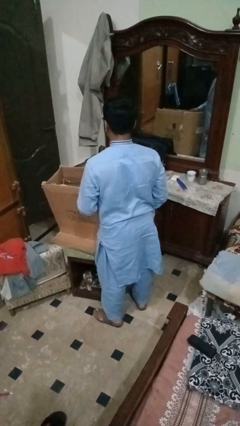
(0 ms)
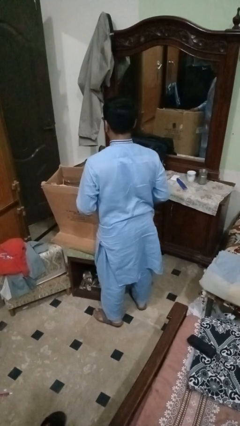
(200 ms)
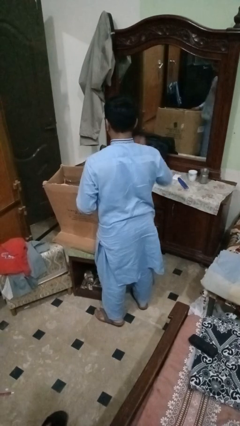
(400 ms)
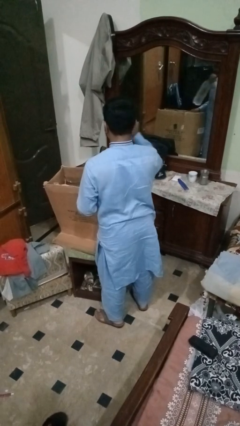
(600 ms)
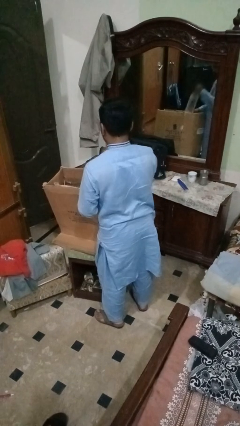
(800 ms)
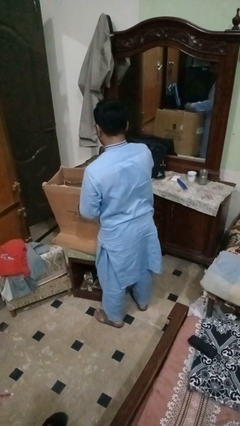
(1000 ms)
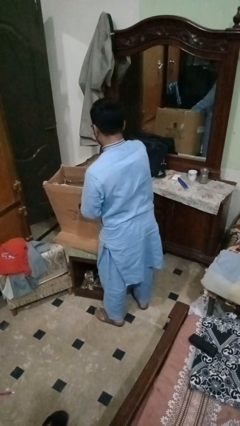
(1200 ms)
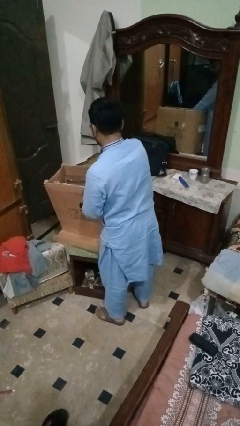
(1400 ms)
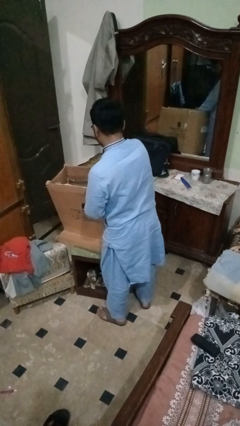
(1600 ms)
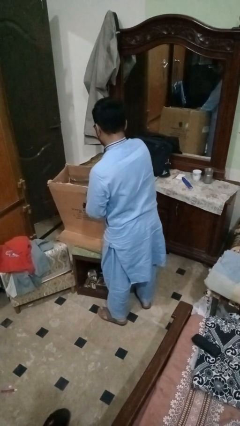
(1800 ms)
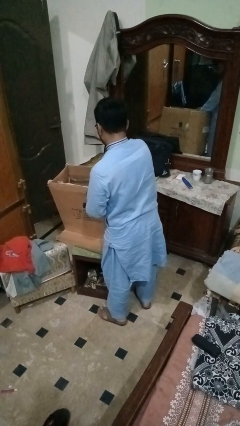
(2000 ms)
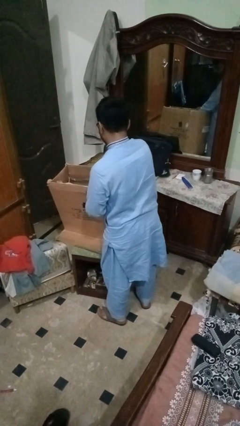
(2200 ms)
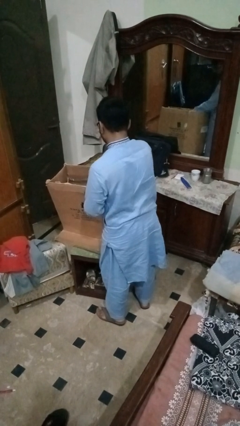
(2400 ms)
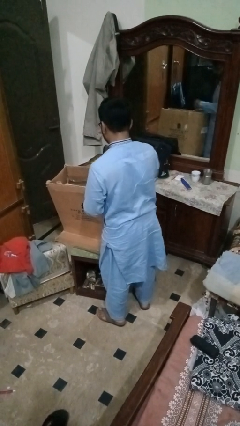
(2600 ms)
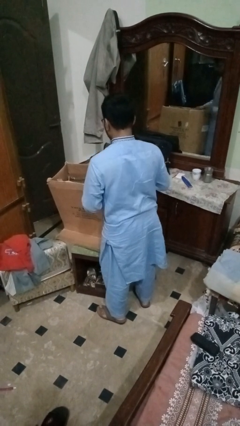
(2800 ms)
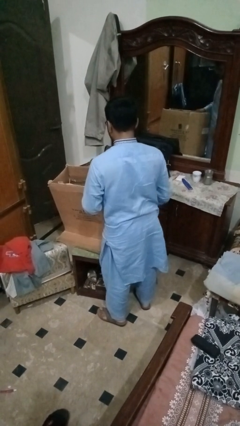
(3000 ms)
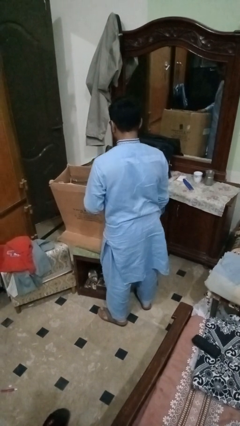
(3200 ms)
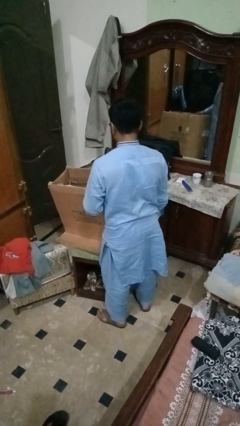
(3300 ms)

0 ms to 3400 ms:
person puts object into box

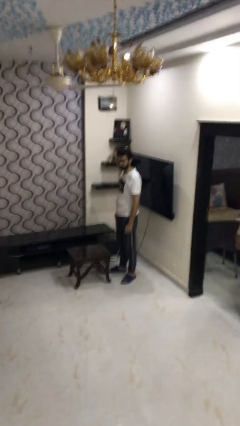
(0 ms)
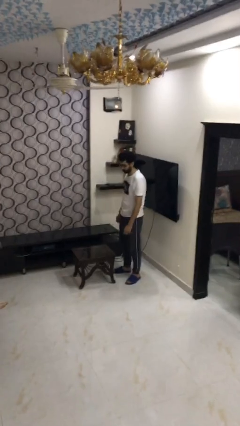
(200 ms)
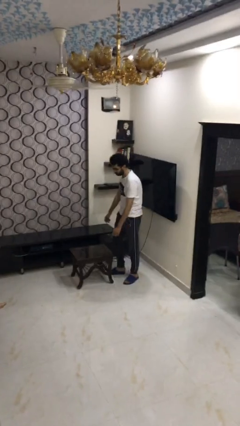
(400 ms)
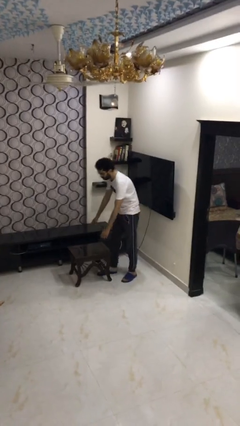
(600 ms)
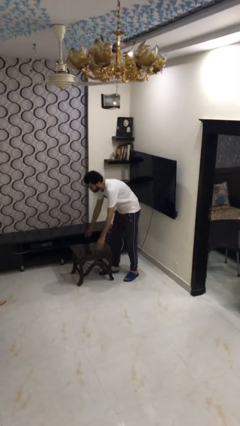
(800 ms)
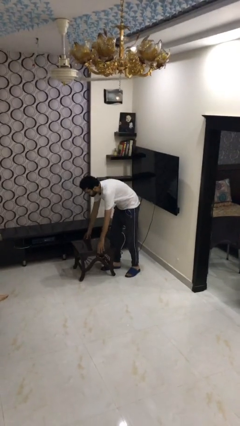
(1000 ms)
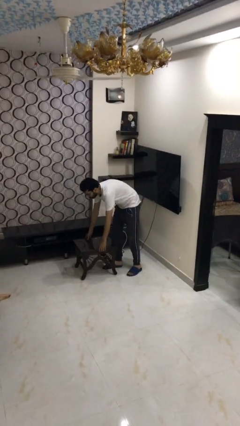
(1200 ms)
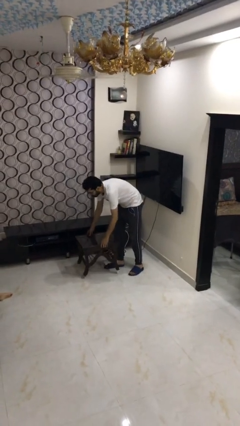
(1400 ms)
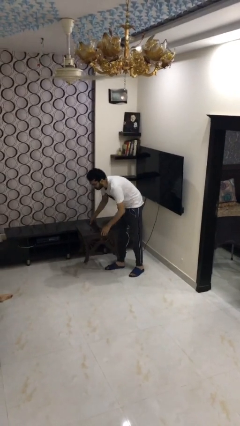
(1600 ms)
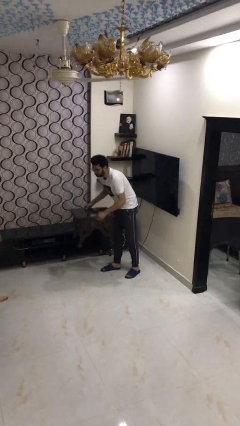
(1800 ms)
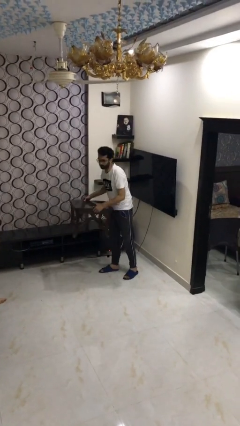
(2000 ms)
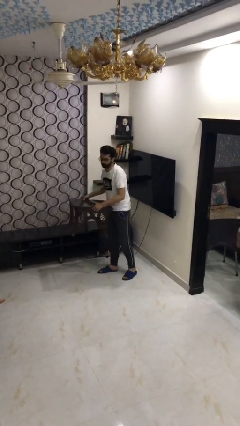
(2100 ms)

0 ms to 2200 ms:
person picks up object from floor

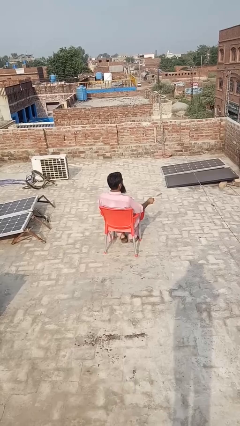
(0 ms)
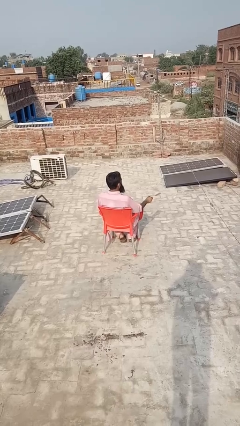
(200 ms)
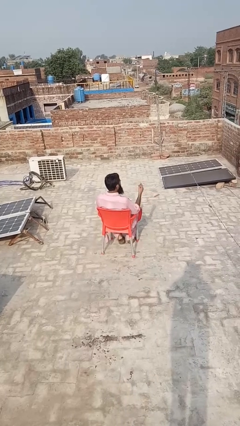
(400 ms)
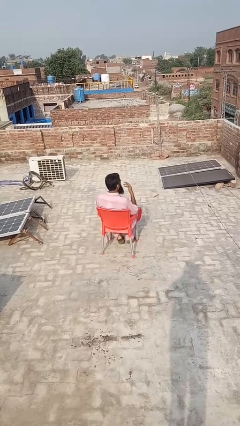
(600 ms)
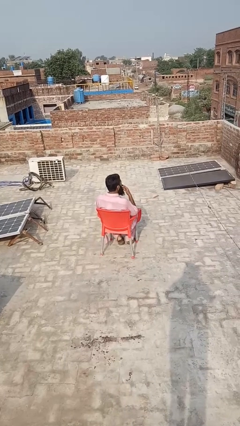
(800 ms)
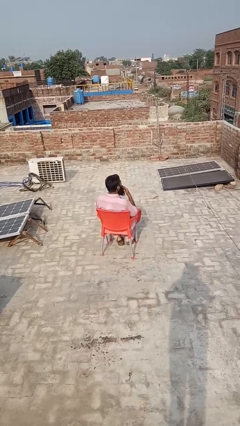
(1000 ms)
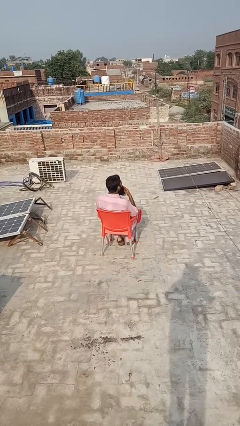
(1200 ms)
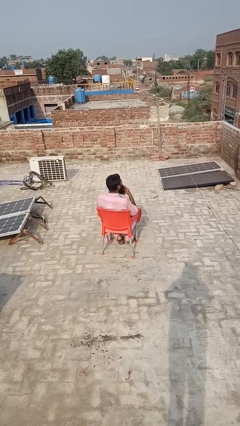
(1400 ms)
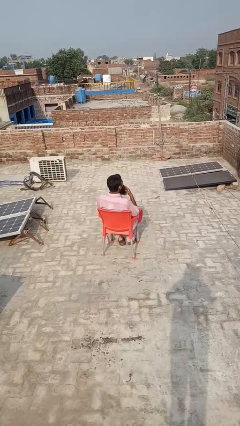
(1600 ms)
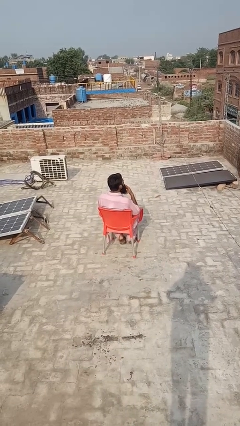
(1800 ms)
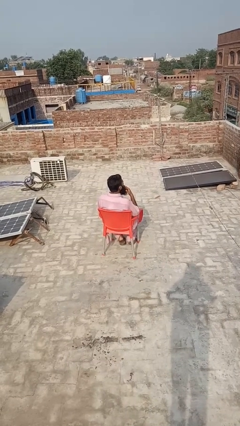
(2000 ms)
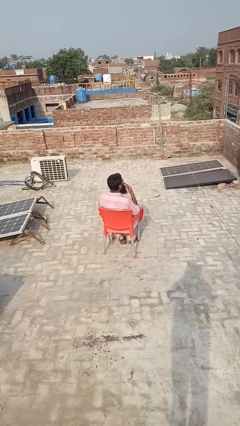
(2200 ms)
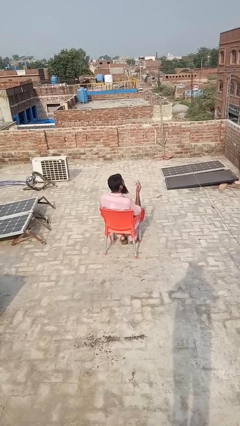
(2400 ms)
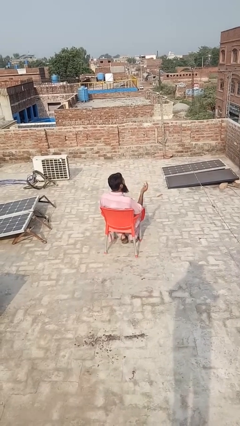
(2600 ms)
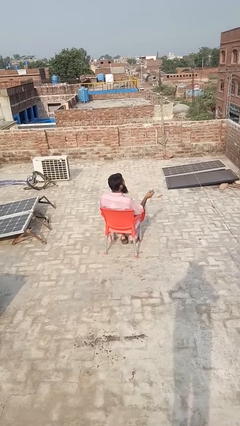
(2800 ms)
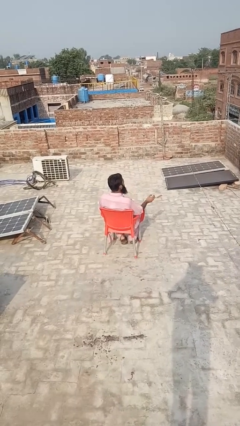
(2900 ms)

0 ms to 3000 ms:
person vapes

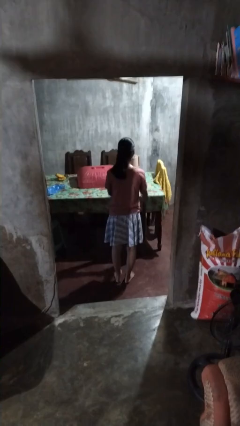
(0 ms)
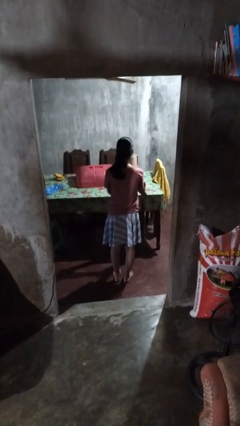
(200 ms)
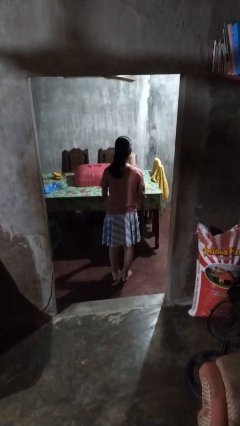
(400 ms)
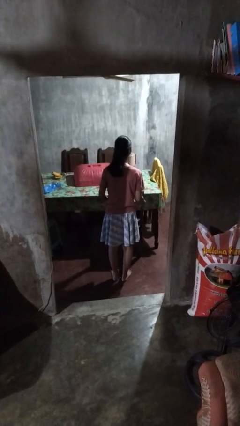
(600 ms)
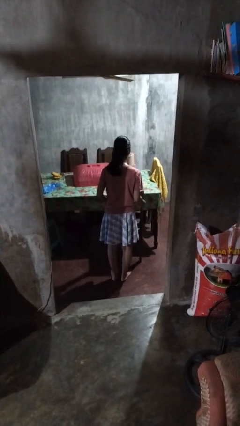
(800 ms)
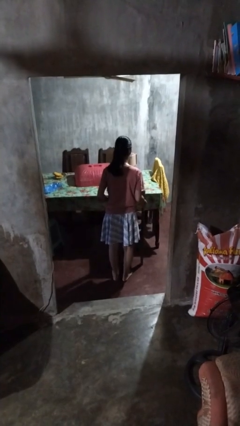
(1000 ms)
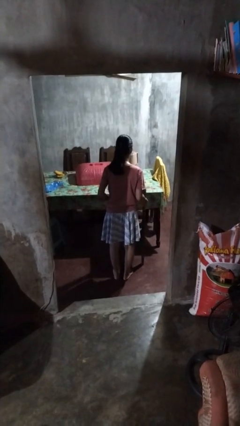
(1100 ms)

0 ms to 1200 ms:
person pulls out chair

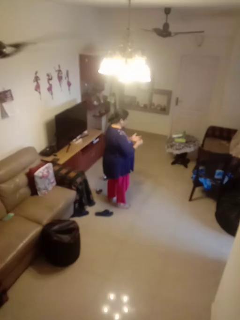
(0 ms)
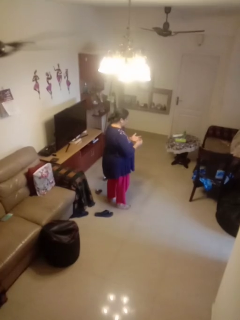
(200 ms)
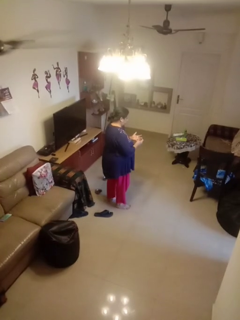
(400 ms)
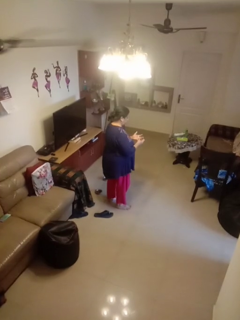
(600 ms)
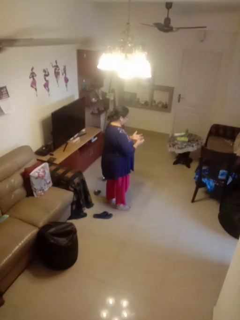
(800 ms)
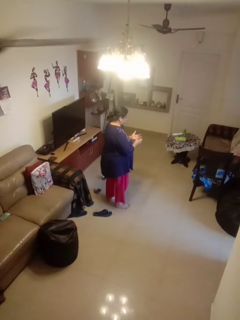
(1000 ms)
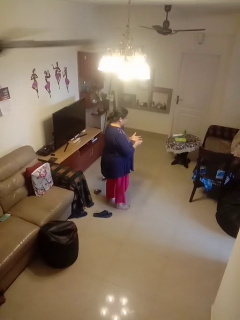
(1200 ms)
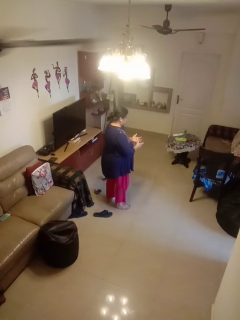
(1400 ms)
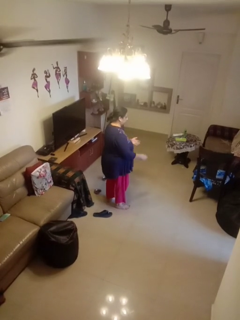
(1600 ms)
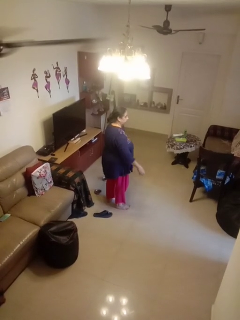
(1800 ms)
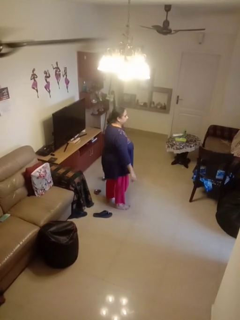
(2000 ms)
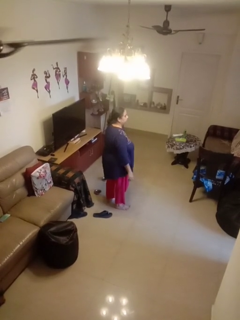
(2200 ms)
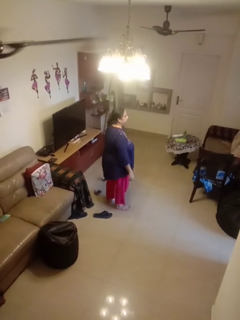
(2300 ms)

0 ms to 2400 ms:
person puts on ring

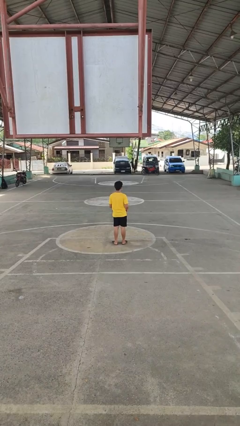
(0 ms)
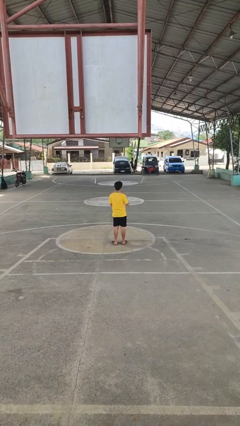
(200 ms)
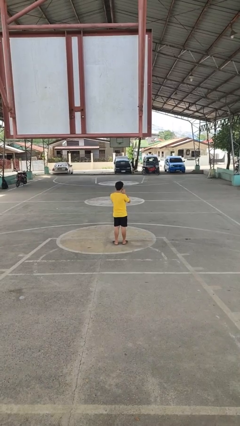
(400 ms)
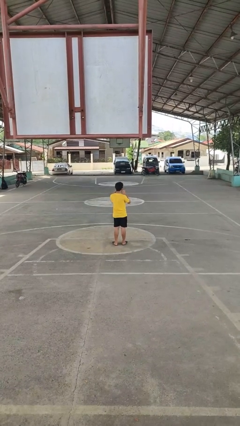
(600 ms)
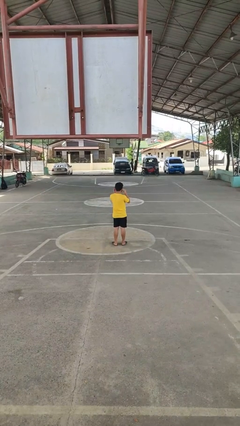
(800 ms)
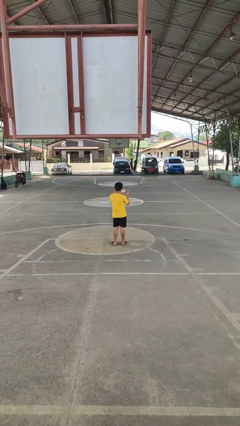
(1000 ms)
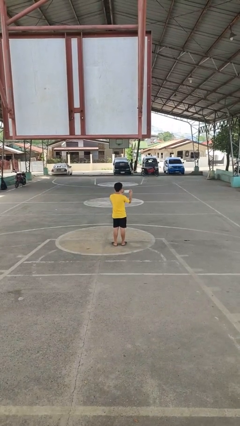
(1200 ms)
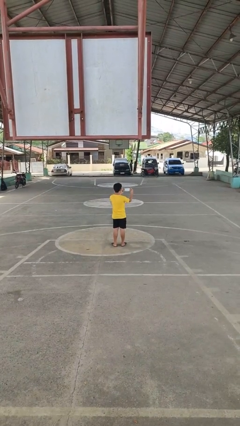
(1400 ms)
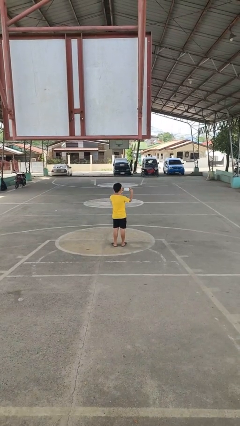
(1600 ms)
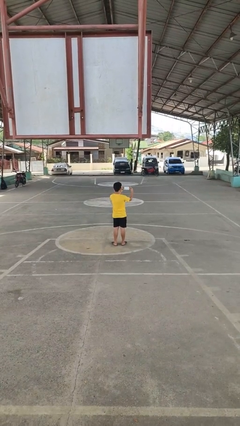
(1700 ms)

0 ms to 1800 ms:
person takes off facemask

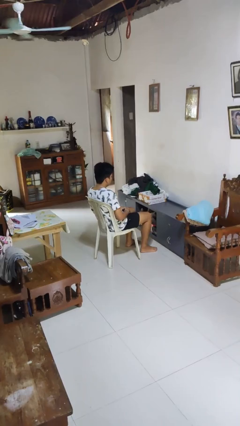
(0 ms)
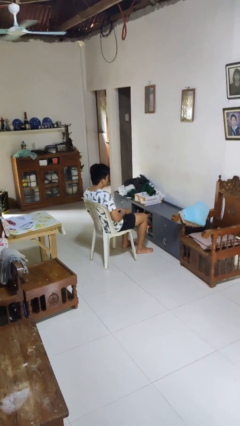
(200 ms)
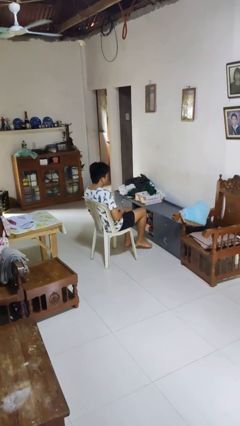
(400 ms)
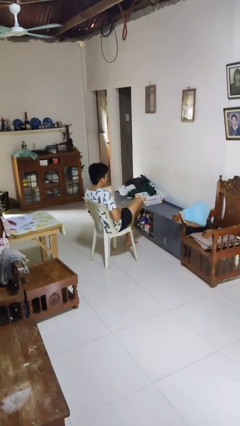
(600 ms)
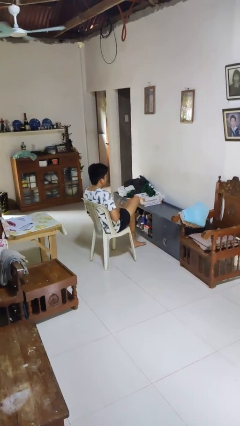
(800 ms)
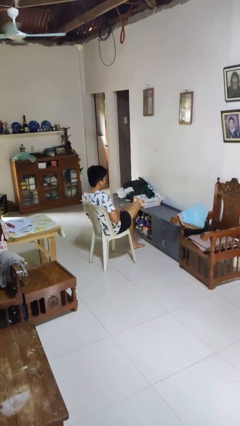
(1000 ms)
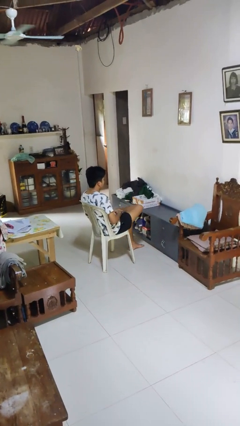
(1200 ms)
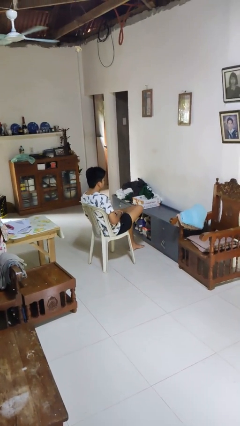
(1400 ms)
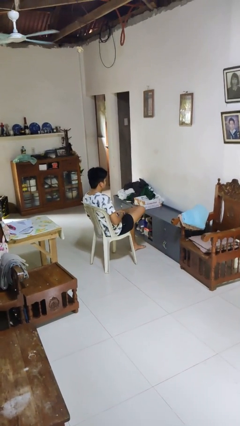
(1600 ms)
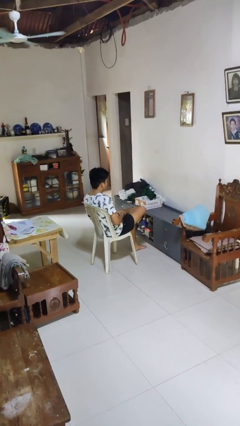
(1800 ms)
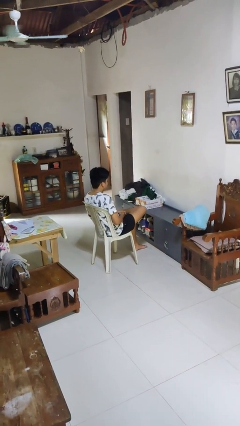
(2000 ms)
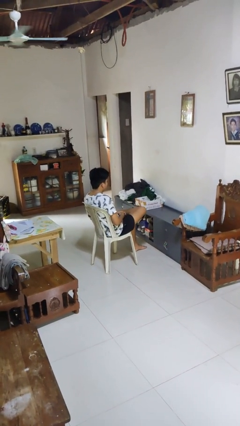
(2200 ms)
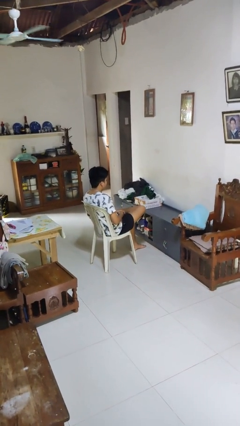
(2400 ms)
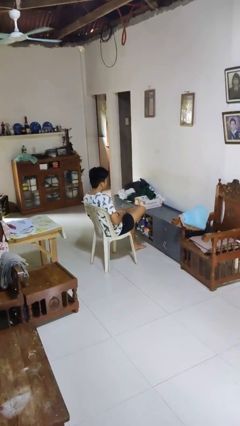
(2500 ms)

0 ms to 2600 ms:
person crosses legs

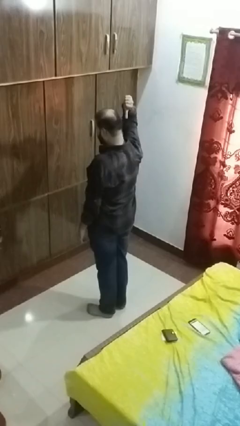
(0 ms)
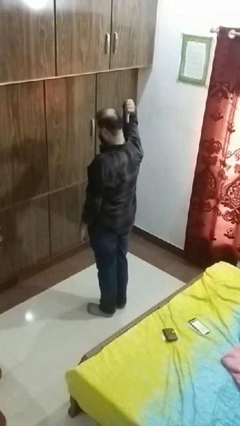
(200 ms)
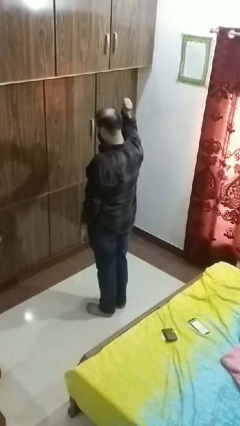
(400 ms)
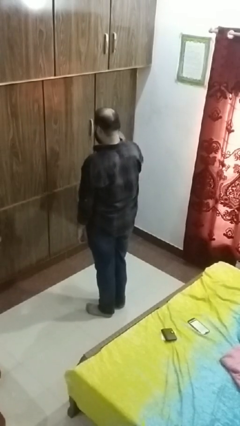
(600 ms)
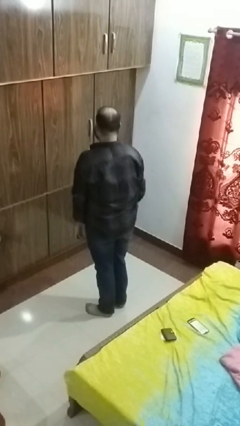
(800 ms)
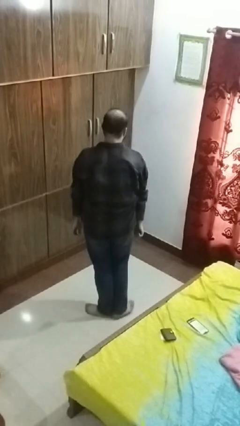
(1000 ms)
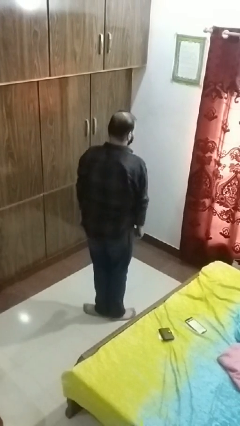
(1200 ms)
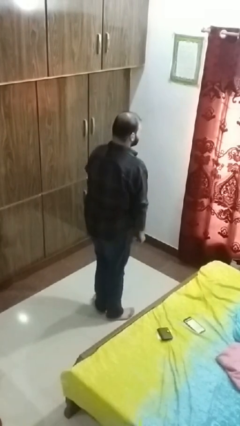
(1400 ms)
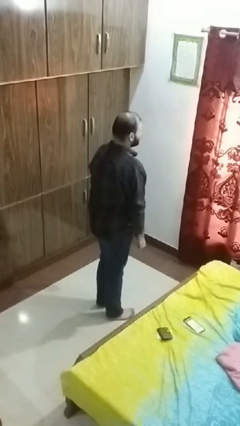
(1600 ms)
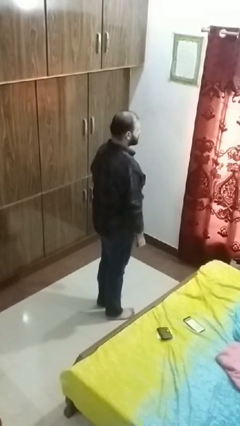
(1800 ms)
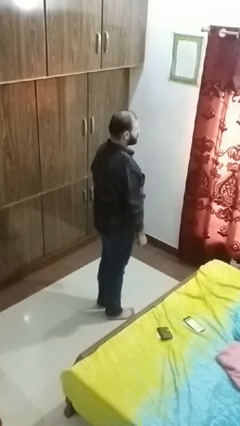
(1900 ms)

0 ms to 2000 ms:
person gestures behind me
